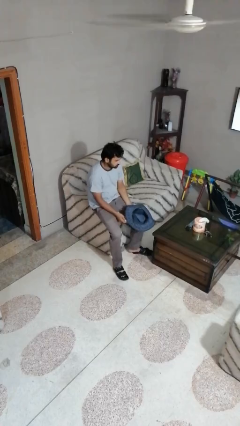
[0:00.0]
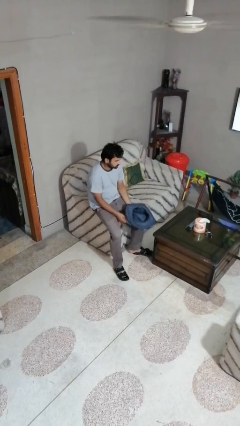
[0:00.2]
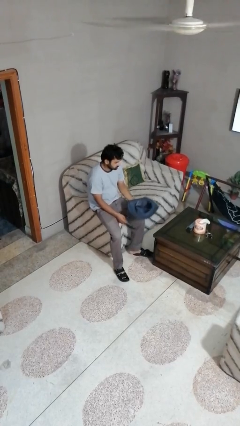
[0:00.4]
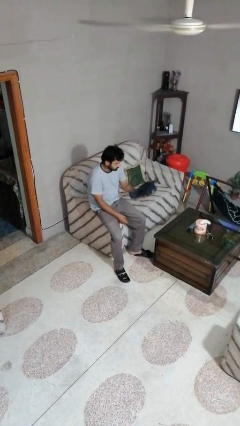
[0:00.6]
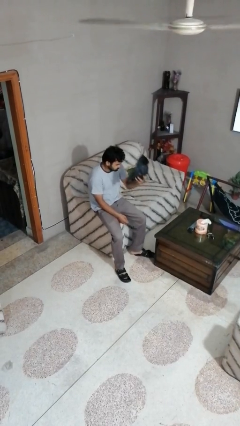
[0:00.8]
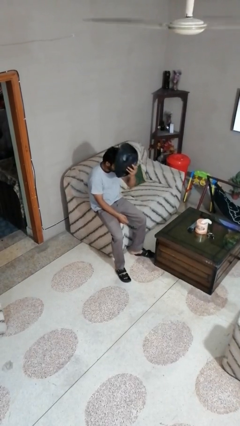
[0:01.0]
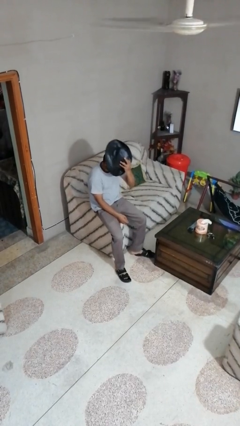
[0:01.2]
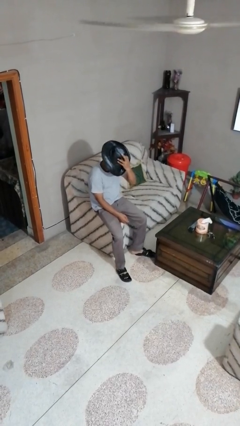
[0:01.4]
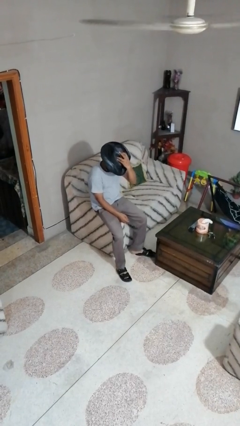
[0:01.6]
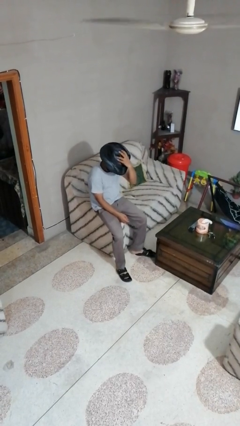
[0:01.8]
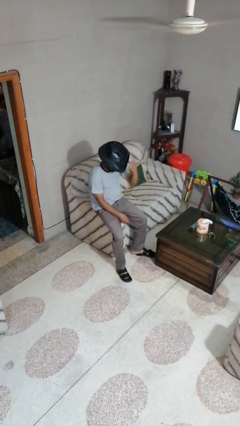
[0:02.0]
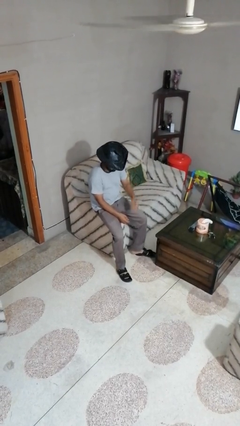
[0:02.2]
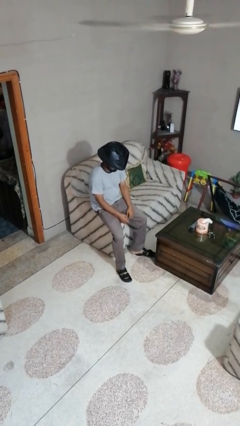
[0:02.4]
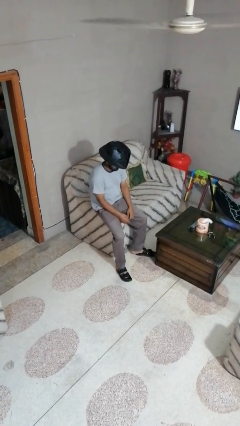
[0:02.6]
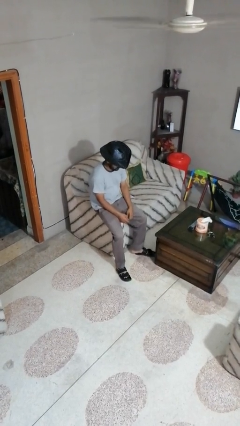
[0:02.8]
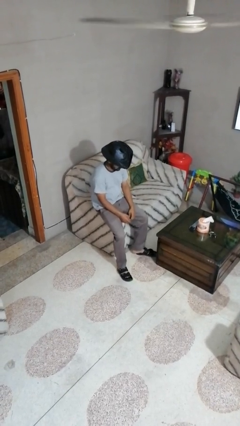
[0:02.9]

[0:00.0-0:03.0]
person puts on hat

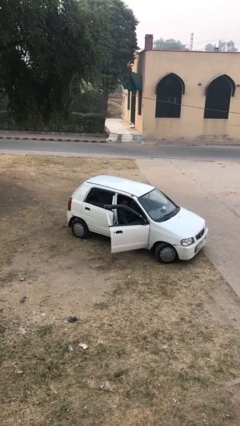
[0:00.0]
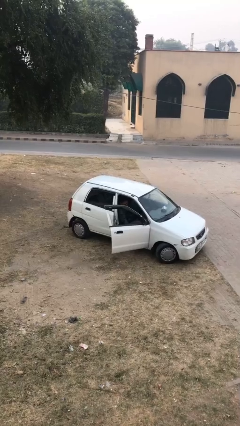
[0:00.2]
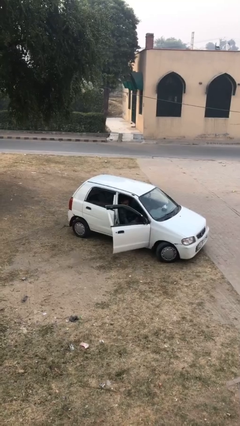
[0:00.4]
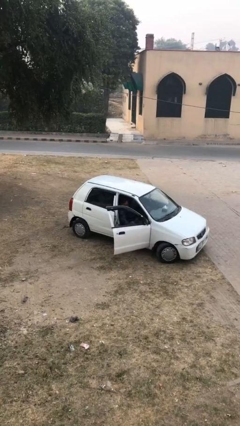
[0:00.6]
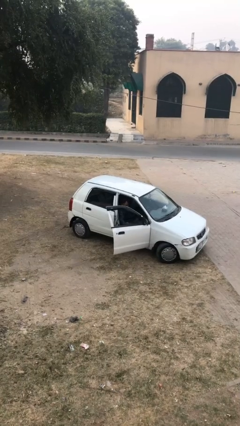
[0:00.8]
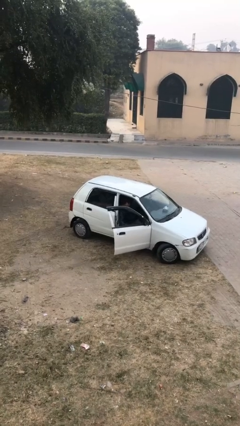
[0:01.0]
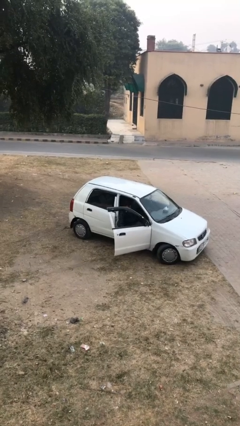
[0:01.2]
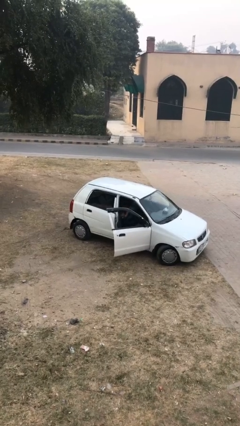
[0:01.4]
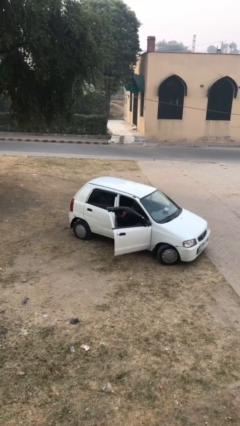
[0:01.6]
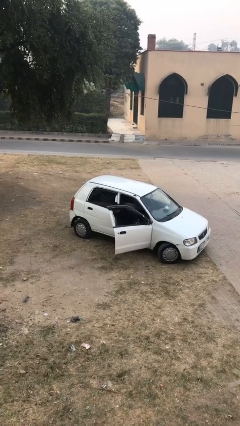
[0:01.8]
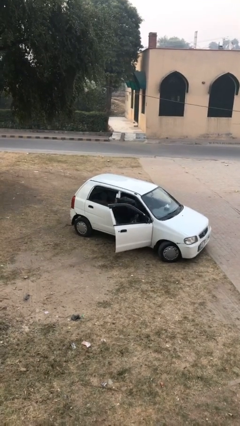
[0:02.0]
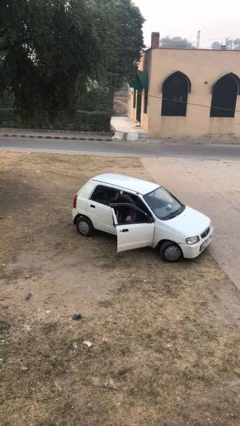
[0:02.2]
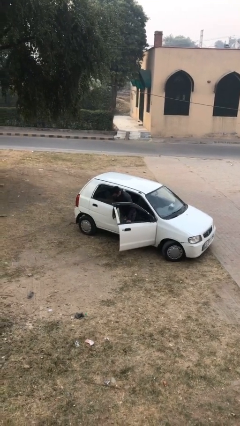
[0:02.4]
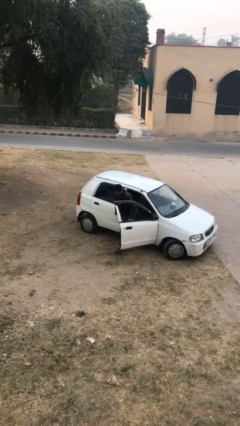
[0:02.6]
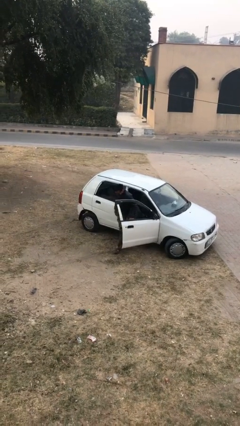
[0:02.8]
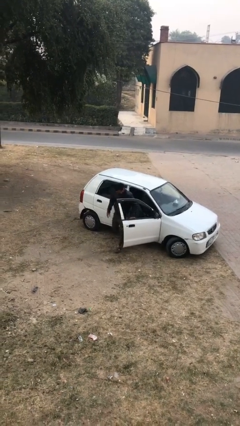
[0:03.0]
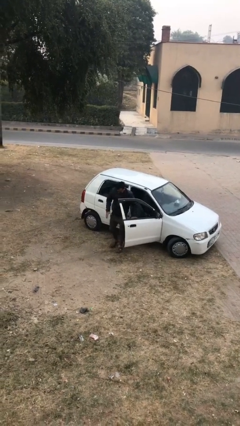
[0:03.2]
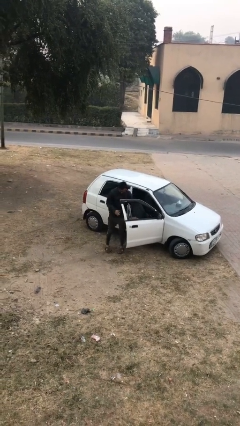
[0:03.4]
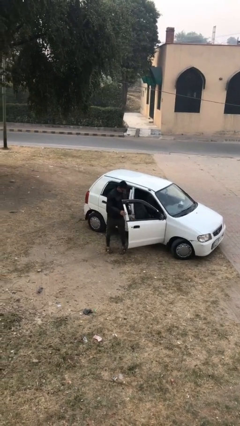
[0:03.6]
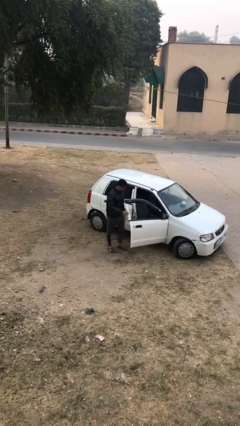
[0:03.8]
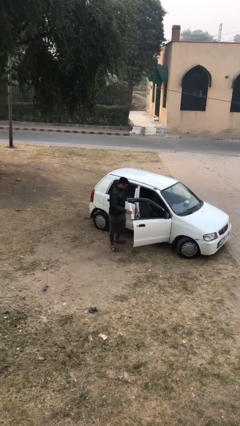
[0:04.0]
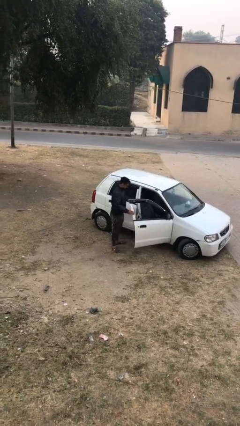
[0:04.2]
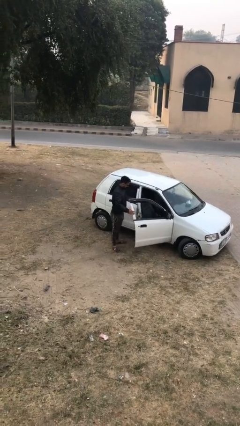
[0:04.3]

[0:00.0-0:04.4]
person exits car

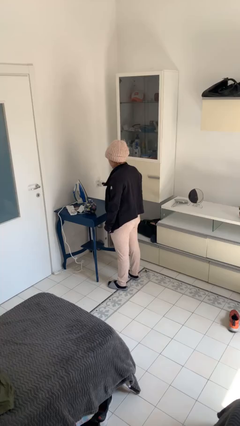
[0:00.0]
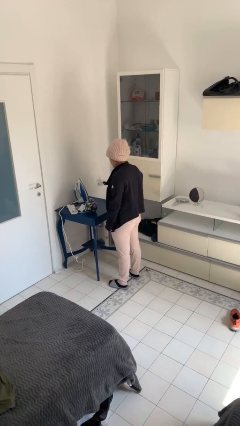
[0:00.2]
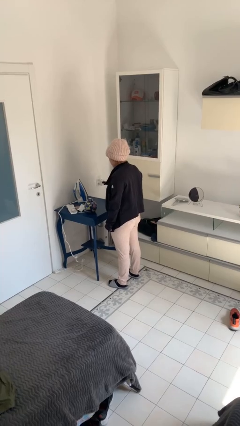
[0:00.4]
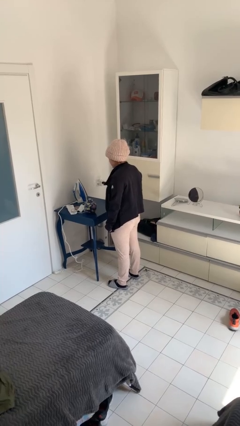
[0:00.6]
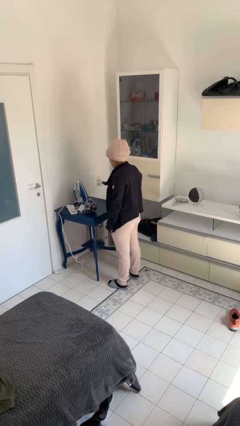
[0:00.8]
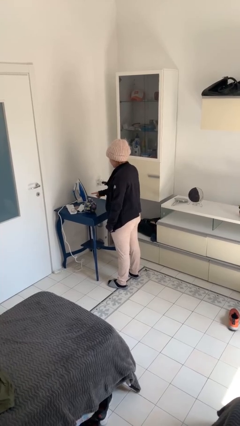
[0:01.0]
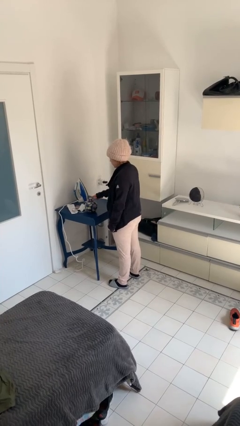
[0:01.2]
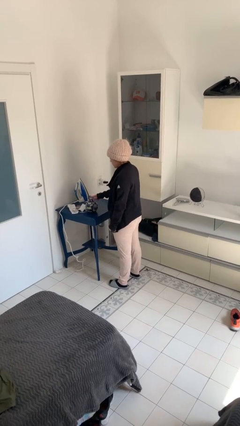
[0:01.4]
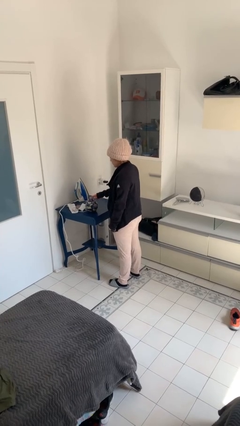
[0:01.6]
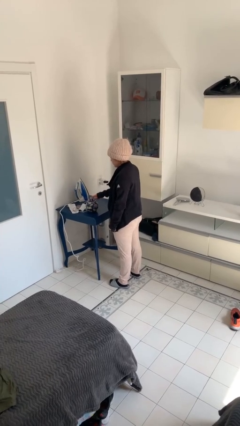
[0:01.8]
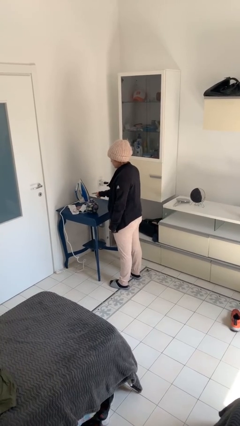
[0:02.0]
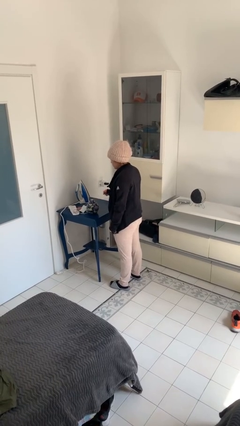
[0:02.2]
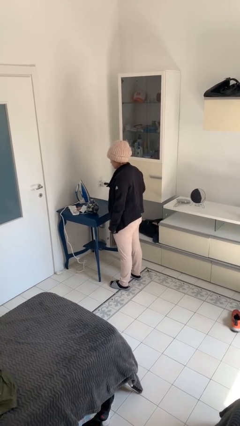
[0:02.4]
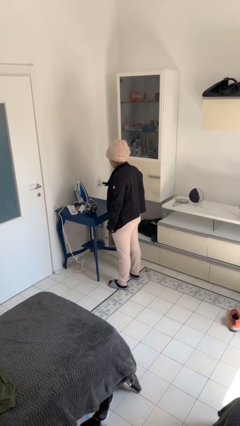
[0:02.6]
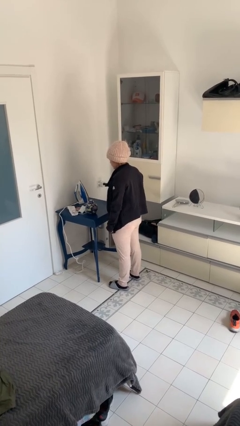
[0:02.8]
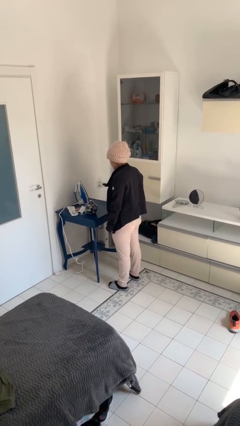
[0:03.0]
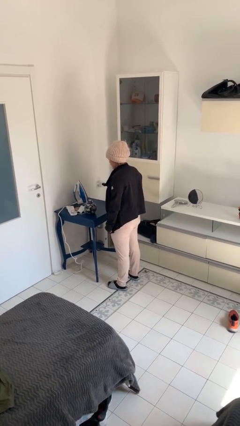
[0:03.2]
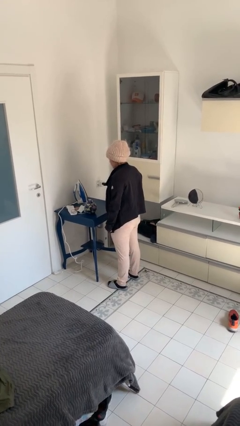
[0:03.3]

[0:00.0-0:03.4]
person taps object with finger

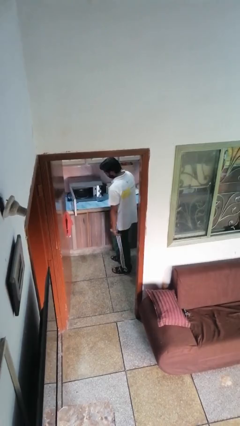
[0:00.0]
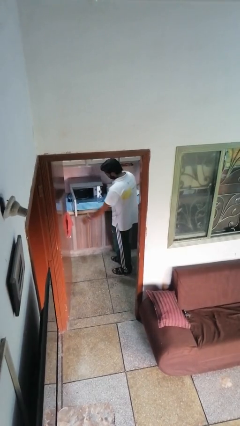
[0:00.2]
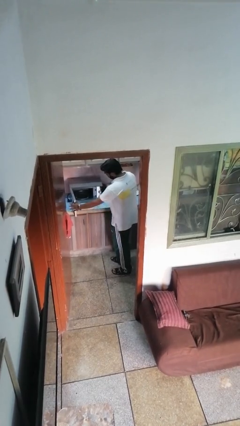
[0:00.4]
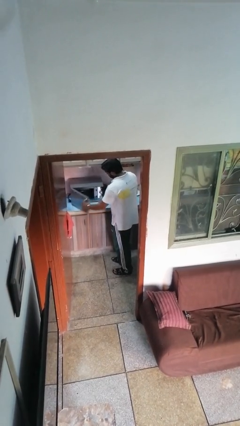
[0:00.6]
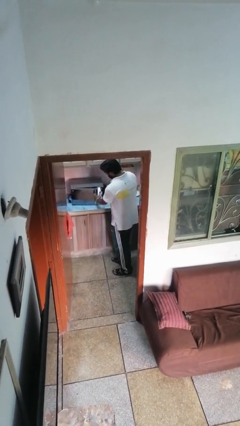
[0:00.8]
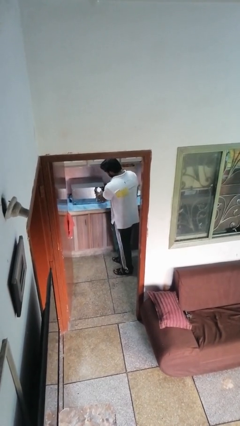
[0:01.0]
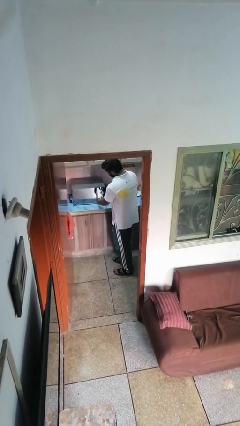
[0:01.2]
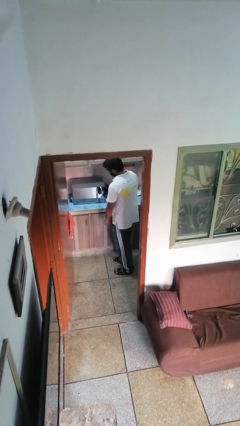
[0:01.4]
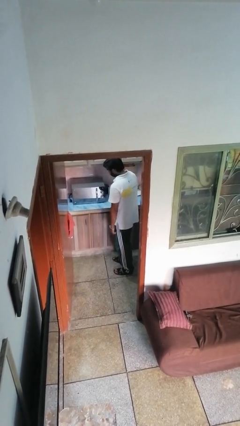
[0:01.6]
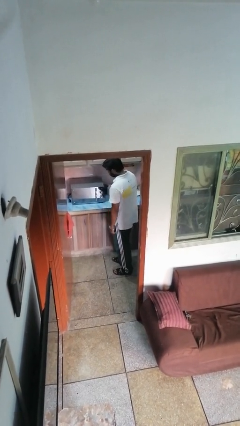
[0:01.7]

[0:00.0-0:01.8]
person closes microwave

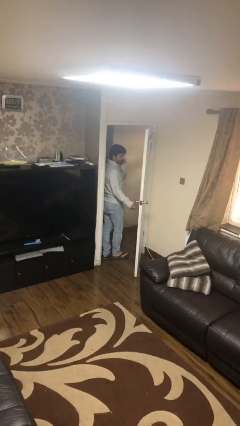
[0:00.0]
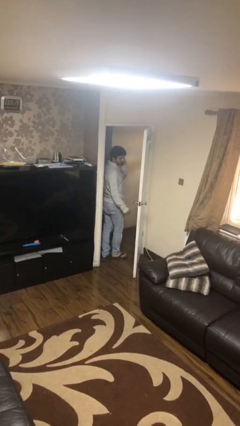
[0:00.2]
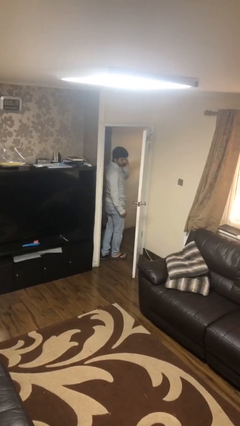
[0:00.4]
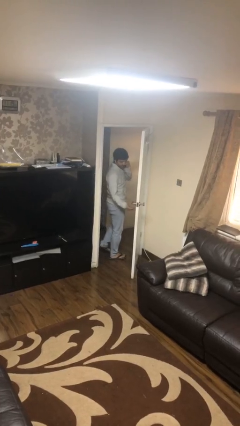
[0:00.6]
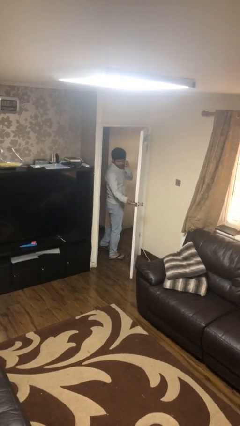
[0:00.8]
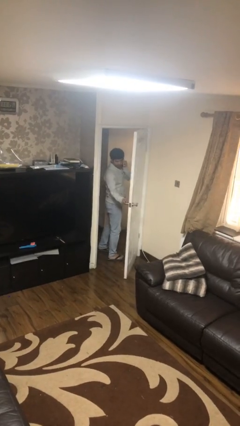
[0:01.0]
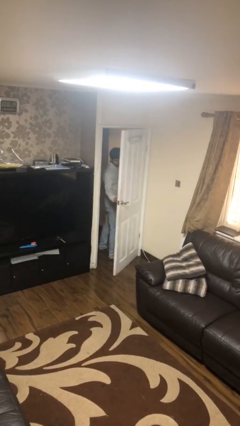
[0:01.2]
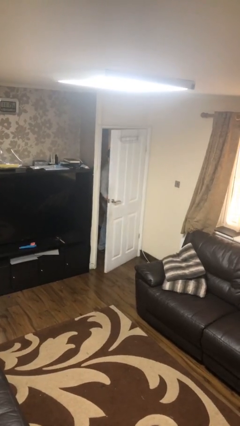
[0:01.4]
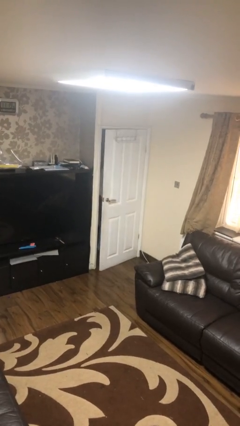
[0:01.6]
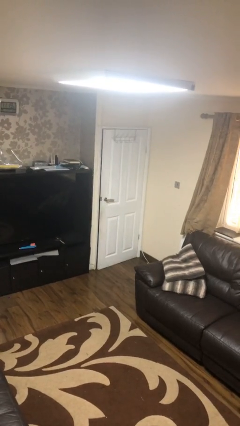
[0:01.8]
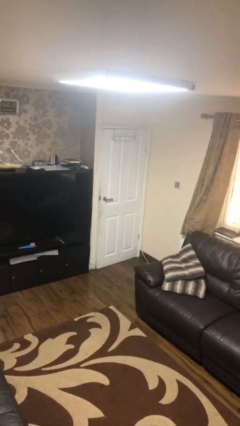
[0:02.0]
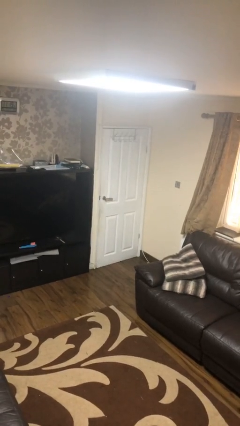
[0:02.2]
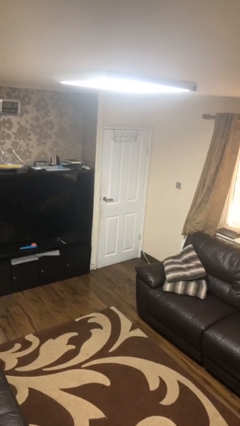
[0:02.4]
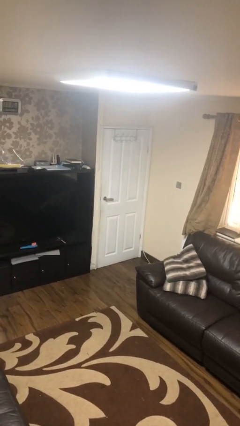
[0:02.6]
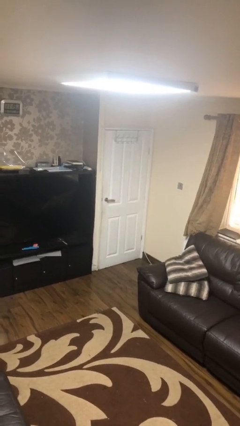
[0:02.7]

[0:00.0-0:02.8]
person closes facility door

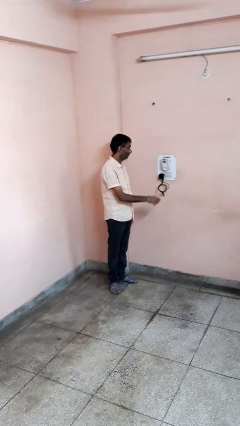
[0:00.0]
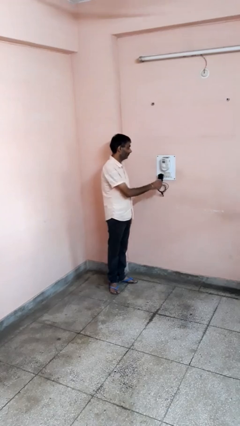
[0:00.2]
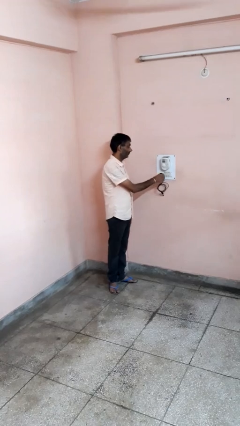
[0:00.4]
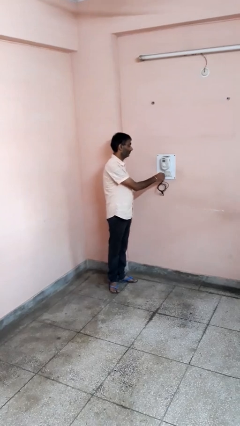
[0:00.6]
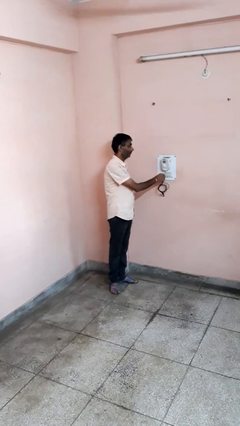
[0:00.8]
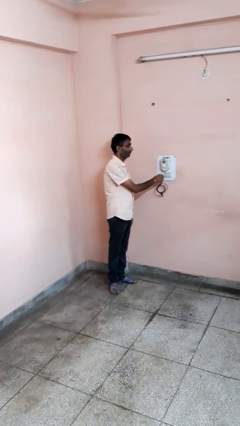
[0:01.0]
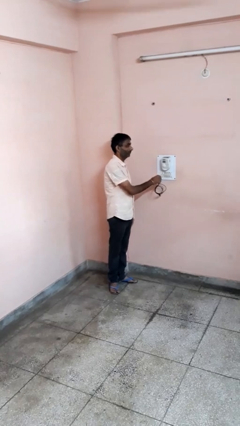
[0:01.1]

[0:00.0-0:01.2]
person unplugs from electrical socket

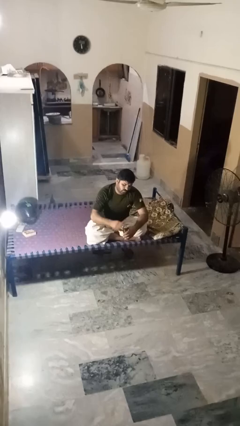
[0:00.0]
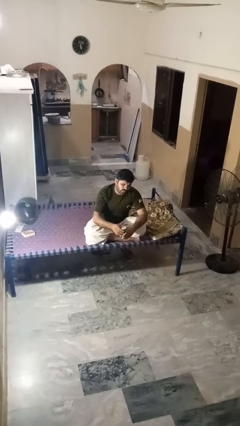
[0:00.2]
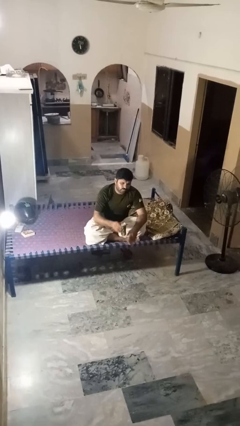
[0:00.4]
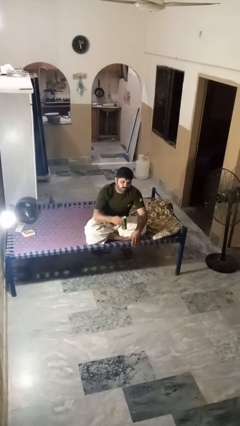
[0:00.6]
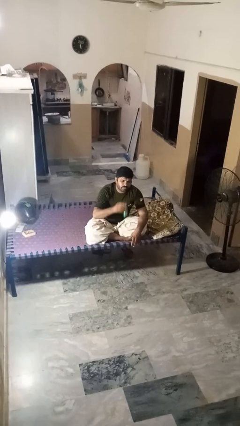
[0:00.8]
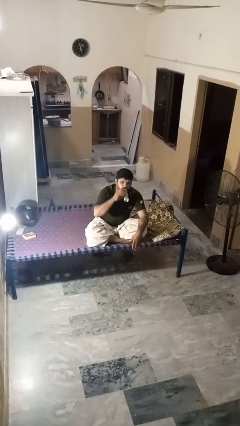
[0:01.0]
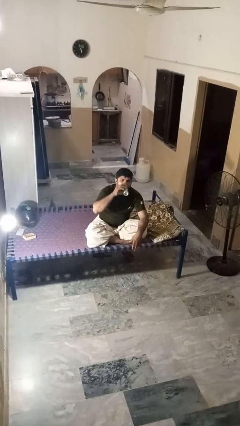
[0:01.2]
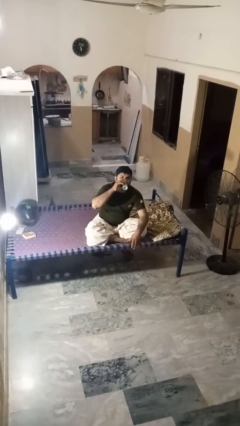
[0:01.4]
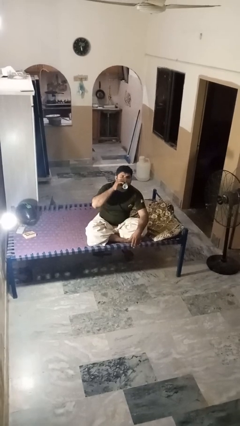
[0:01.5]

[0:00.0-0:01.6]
person drinks from beverage can
